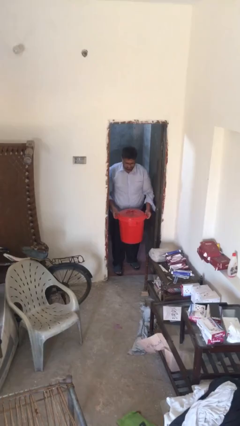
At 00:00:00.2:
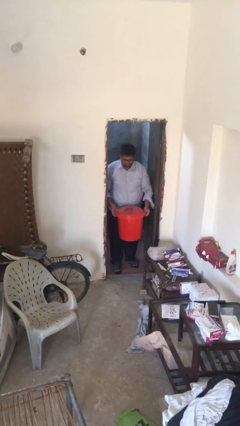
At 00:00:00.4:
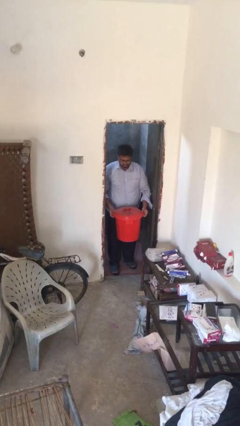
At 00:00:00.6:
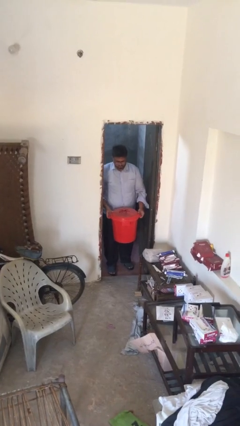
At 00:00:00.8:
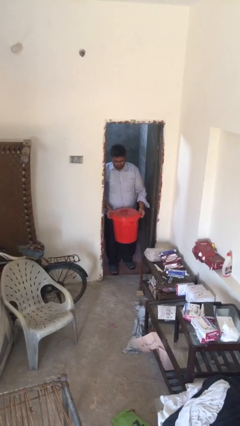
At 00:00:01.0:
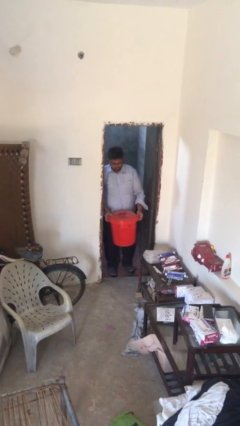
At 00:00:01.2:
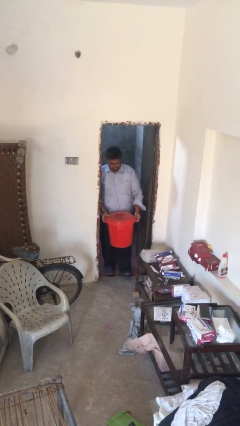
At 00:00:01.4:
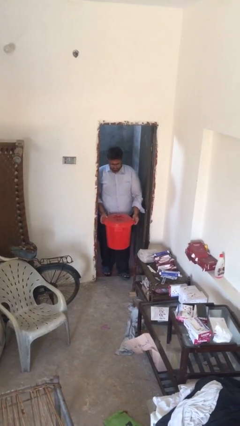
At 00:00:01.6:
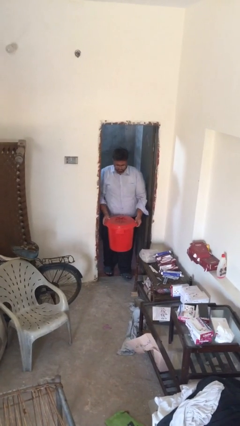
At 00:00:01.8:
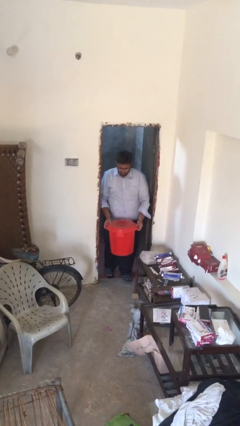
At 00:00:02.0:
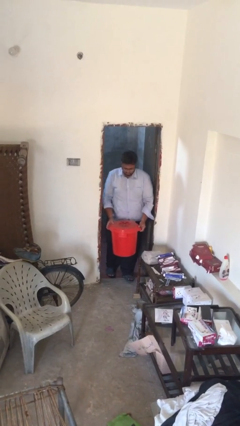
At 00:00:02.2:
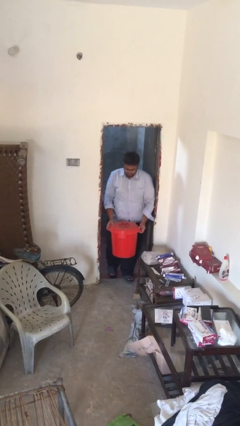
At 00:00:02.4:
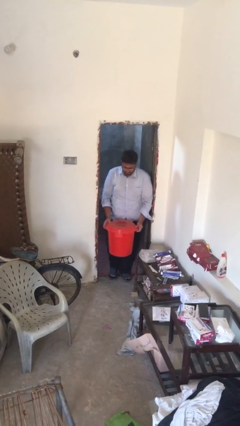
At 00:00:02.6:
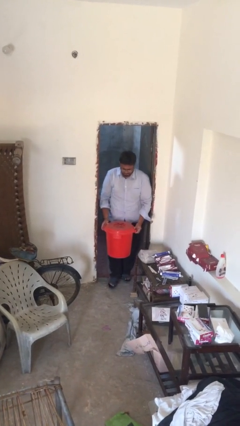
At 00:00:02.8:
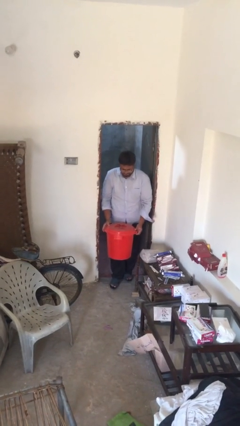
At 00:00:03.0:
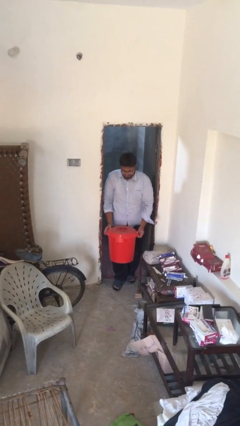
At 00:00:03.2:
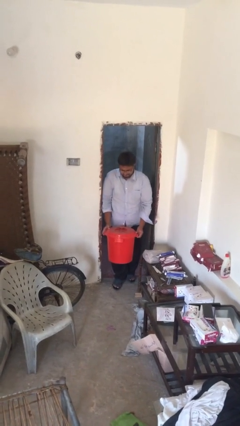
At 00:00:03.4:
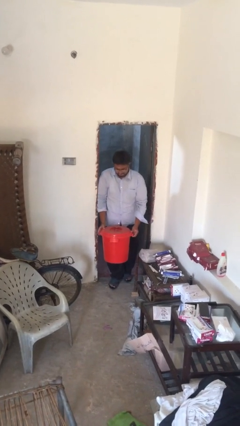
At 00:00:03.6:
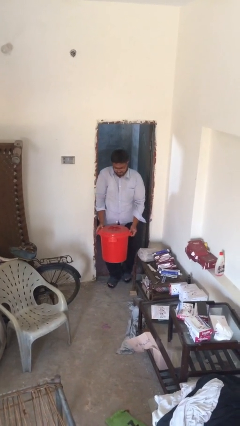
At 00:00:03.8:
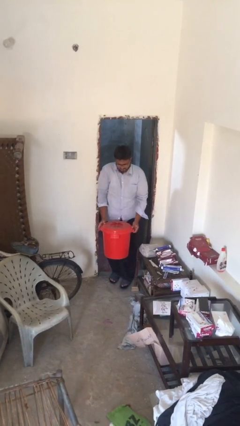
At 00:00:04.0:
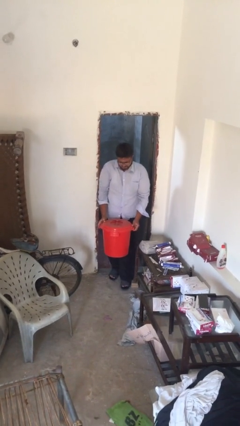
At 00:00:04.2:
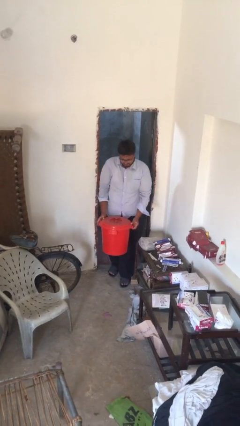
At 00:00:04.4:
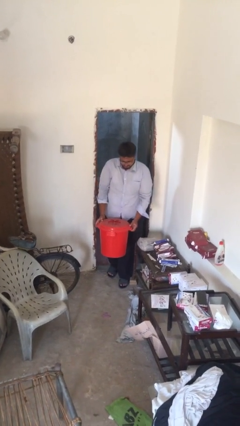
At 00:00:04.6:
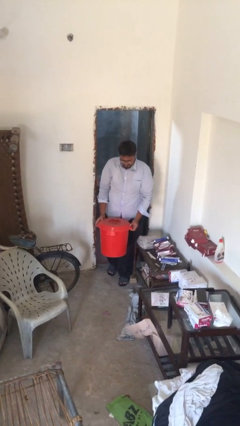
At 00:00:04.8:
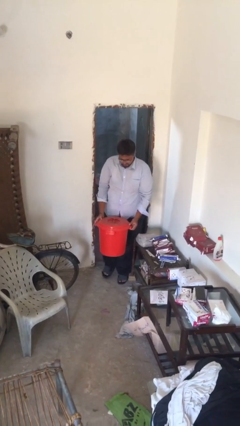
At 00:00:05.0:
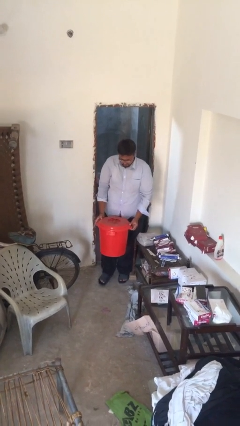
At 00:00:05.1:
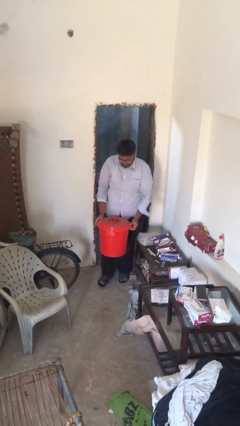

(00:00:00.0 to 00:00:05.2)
person carries heavy object

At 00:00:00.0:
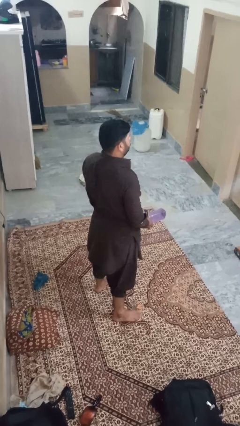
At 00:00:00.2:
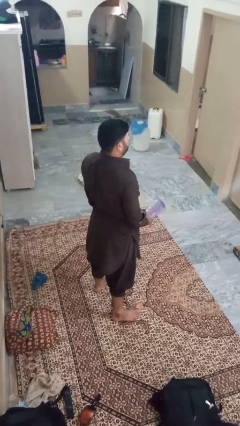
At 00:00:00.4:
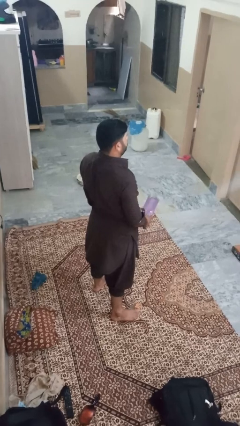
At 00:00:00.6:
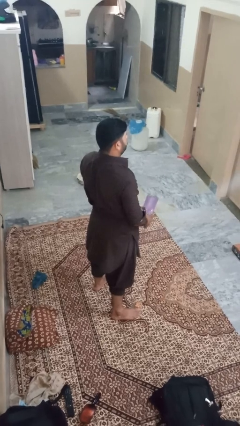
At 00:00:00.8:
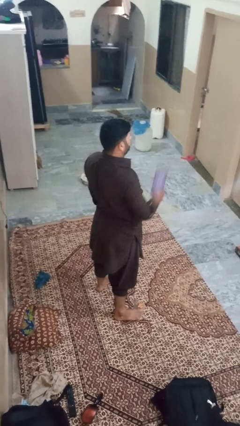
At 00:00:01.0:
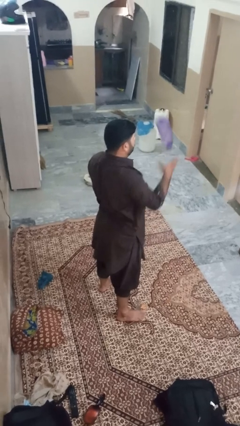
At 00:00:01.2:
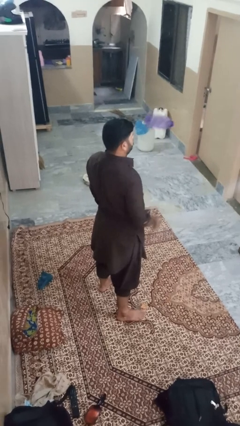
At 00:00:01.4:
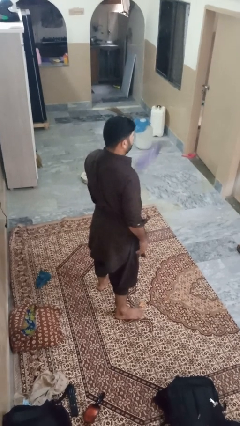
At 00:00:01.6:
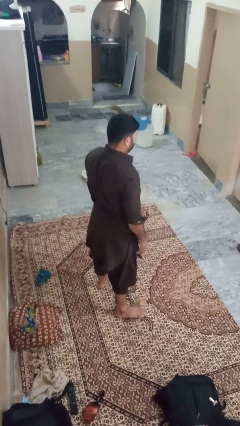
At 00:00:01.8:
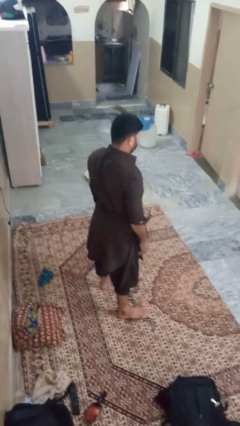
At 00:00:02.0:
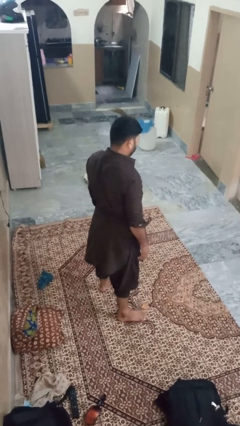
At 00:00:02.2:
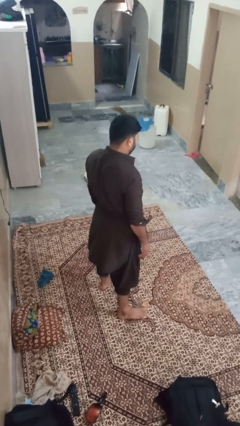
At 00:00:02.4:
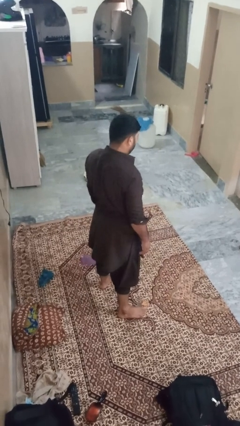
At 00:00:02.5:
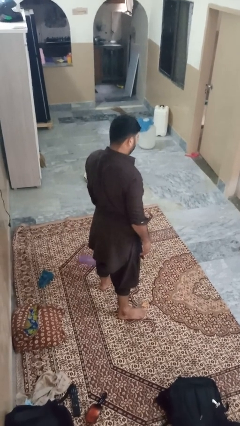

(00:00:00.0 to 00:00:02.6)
person throws object into air

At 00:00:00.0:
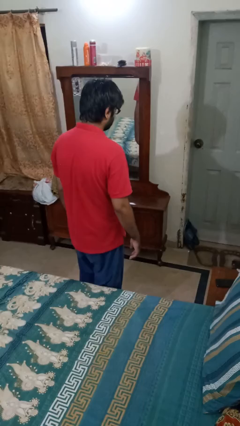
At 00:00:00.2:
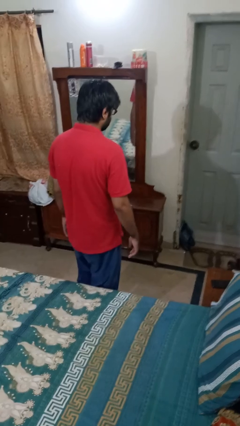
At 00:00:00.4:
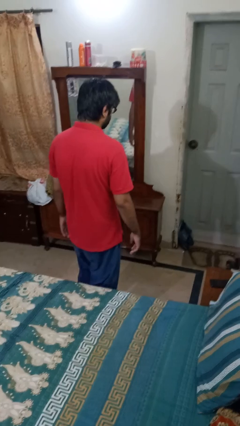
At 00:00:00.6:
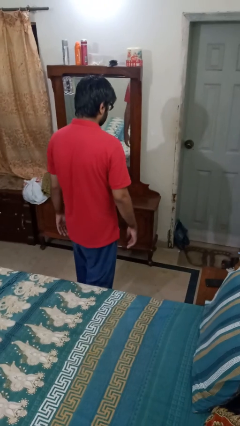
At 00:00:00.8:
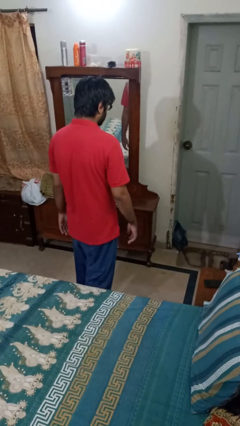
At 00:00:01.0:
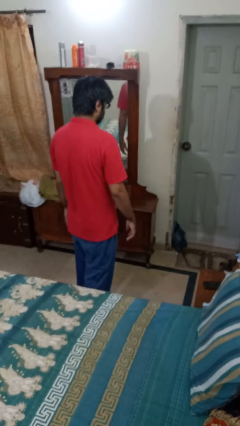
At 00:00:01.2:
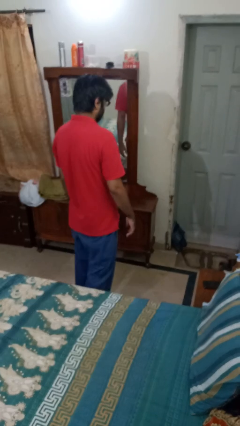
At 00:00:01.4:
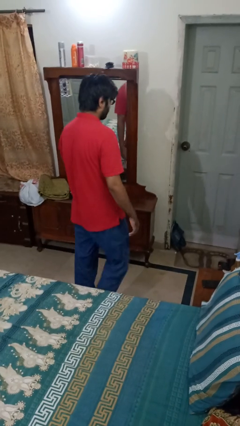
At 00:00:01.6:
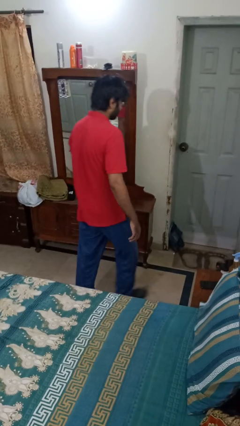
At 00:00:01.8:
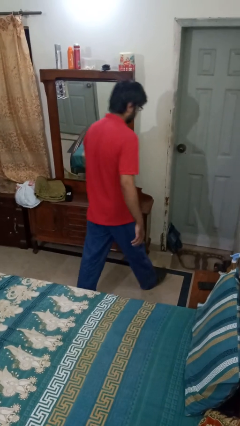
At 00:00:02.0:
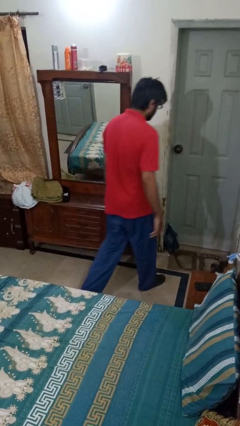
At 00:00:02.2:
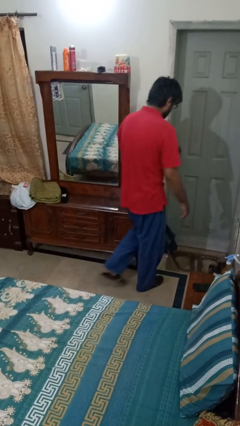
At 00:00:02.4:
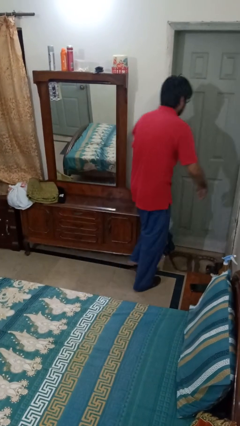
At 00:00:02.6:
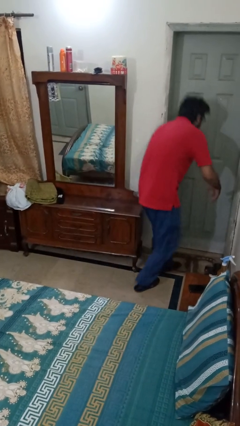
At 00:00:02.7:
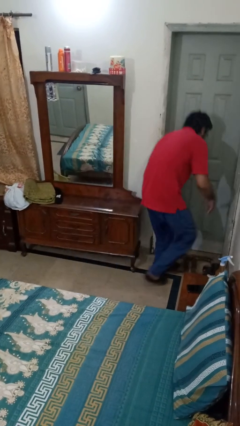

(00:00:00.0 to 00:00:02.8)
person bumps into table

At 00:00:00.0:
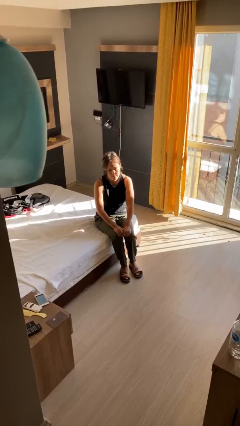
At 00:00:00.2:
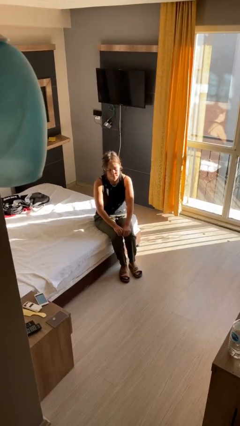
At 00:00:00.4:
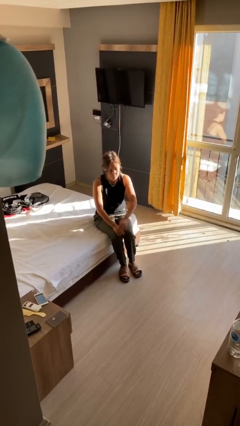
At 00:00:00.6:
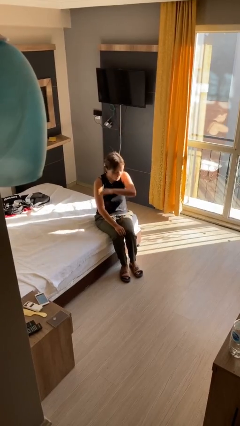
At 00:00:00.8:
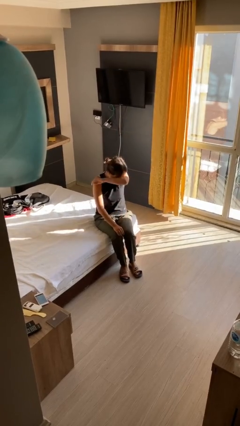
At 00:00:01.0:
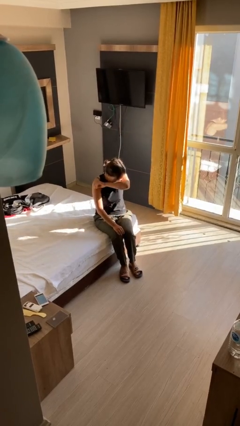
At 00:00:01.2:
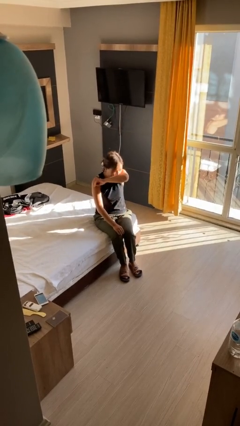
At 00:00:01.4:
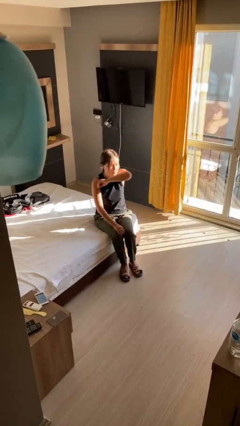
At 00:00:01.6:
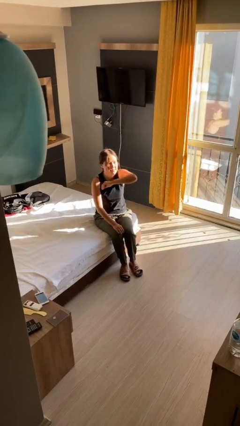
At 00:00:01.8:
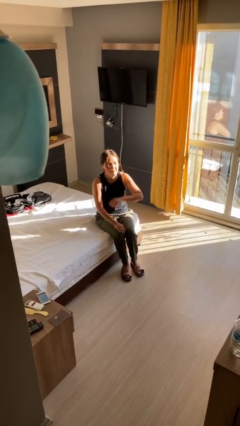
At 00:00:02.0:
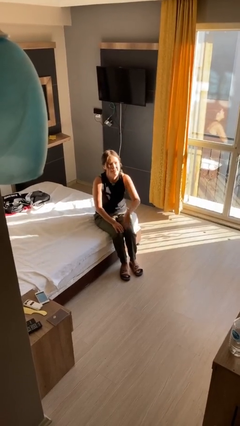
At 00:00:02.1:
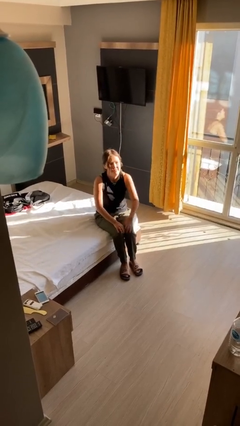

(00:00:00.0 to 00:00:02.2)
person sneezes into hand

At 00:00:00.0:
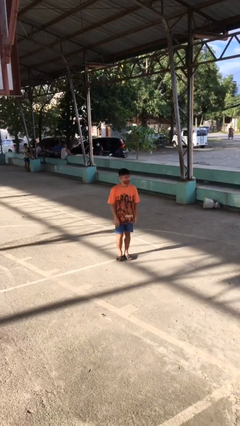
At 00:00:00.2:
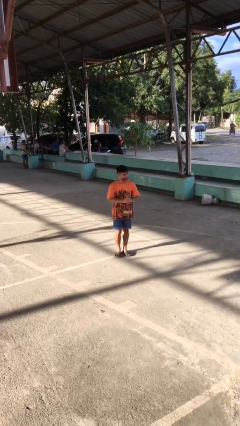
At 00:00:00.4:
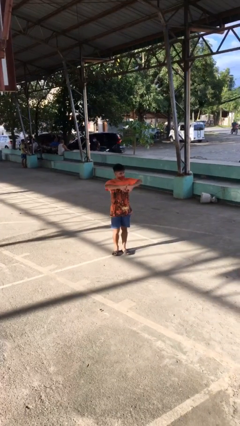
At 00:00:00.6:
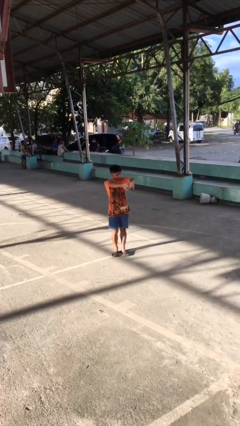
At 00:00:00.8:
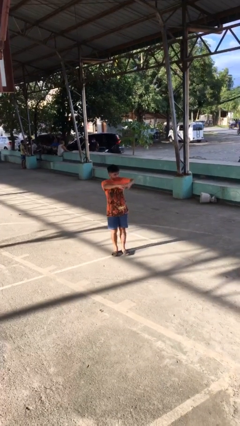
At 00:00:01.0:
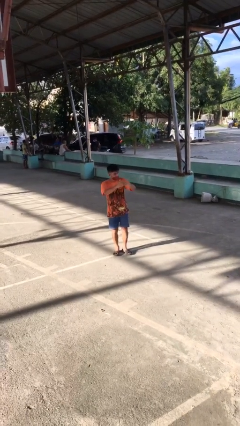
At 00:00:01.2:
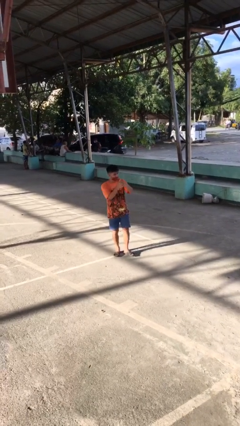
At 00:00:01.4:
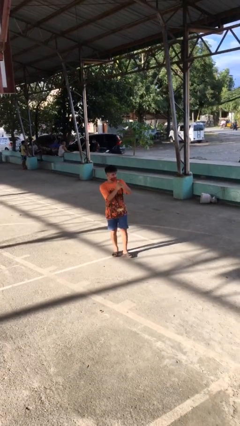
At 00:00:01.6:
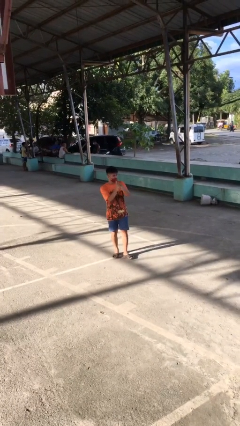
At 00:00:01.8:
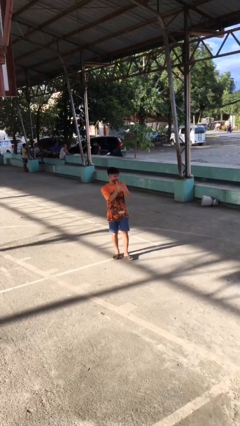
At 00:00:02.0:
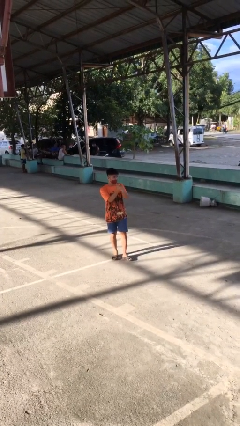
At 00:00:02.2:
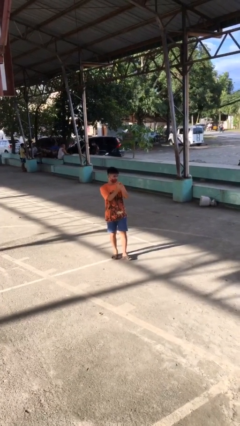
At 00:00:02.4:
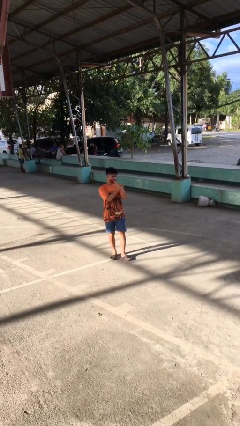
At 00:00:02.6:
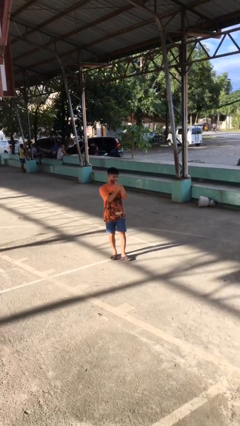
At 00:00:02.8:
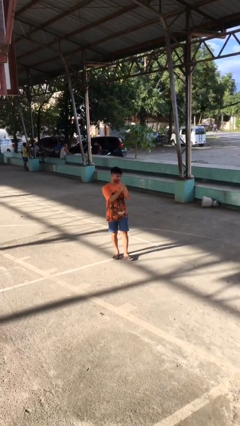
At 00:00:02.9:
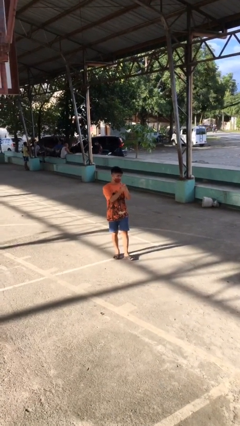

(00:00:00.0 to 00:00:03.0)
person cracks knuckles

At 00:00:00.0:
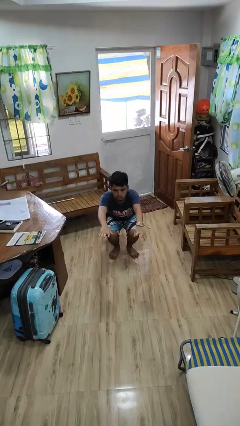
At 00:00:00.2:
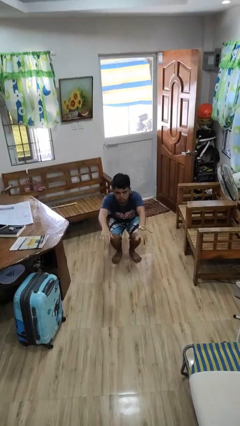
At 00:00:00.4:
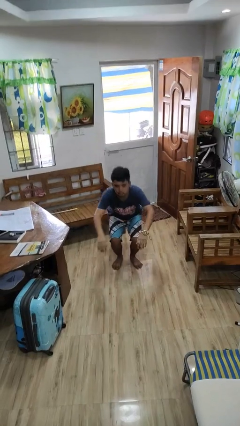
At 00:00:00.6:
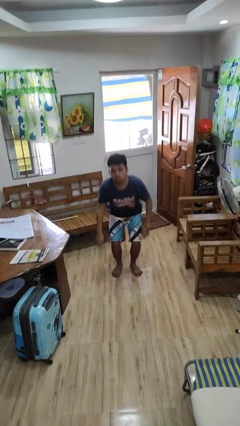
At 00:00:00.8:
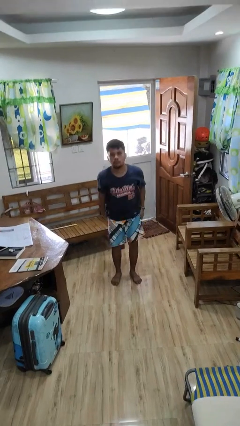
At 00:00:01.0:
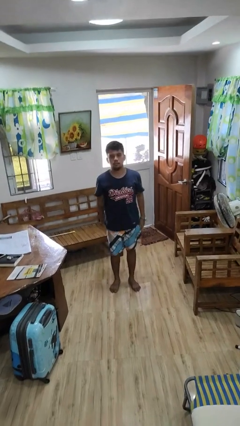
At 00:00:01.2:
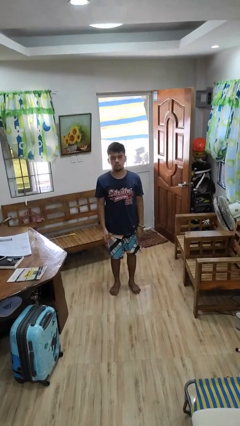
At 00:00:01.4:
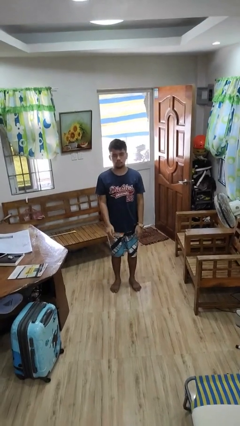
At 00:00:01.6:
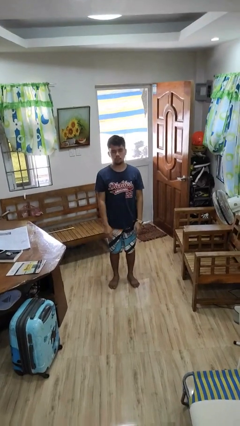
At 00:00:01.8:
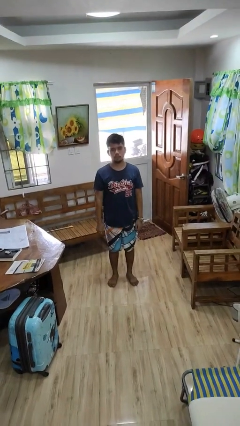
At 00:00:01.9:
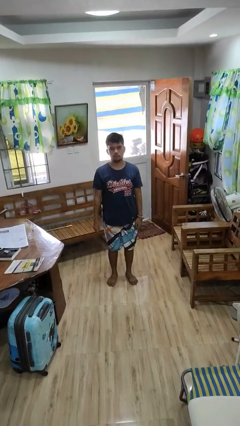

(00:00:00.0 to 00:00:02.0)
person stands up
